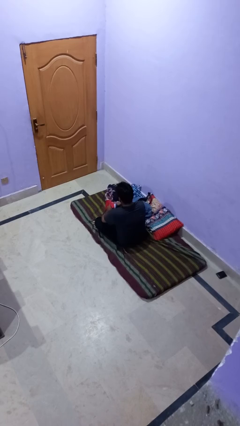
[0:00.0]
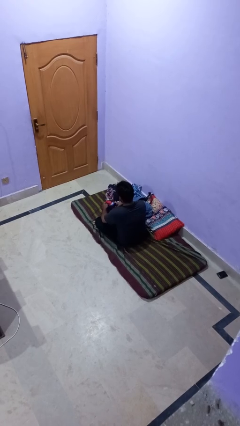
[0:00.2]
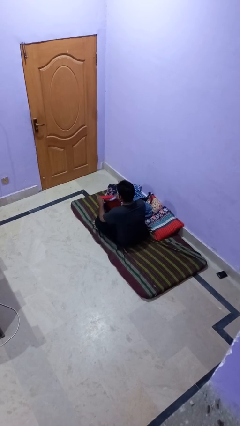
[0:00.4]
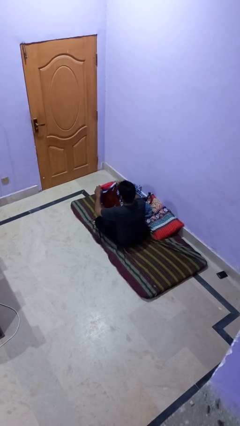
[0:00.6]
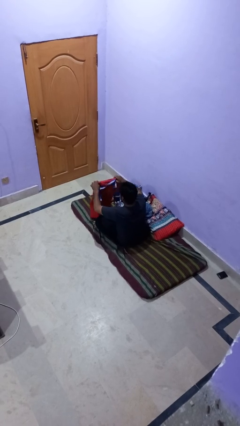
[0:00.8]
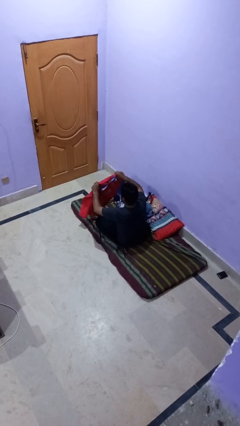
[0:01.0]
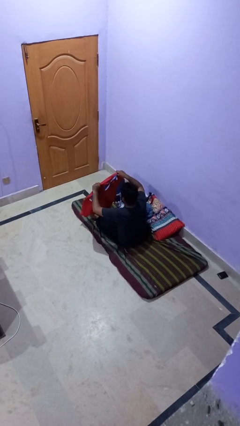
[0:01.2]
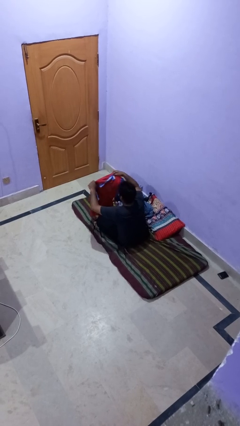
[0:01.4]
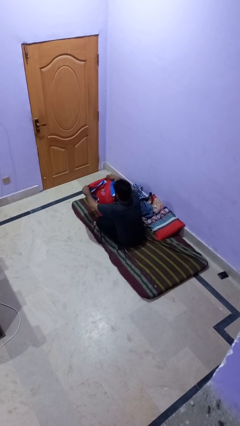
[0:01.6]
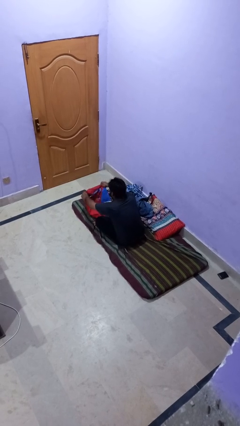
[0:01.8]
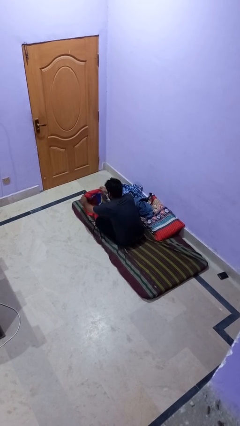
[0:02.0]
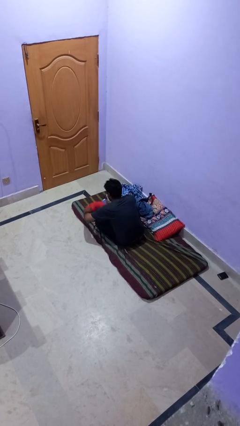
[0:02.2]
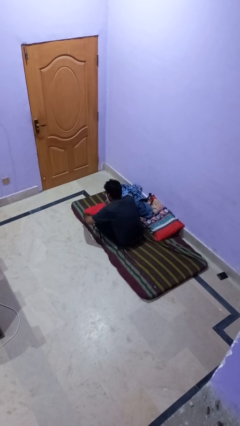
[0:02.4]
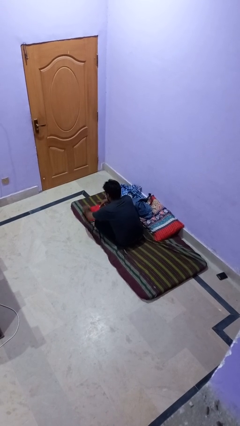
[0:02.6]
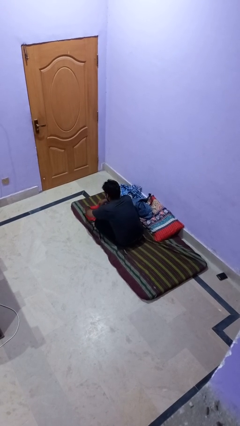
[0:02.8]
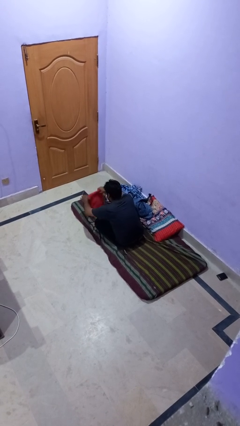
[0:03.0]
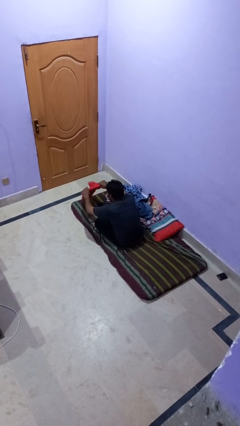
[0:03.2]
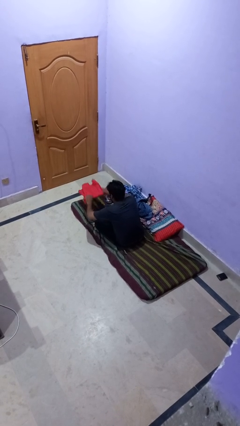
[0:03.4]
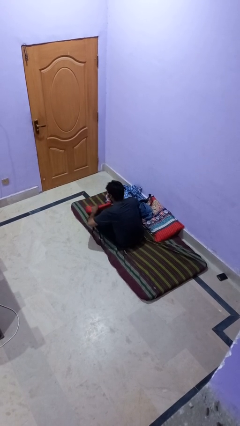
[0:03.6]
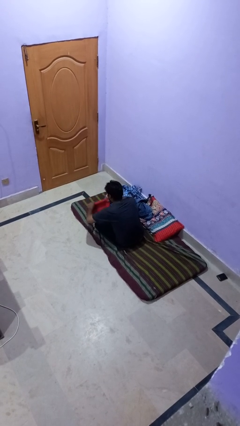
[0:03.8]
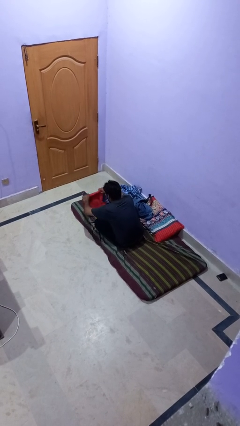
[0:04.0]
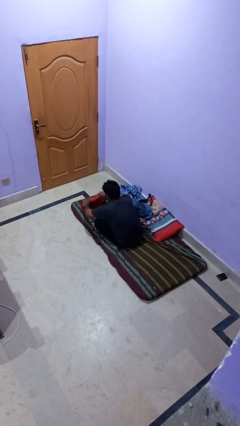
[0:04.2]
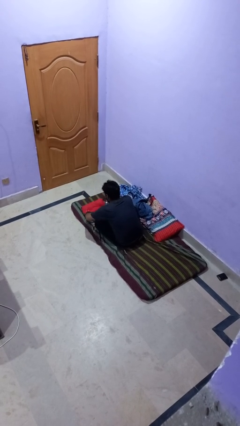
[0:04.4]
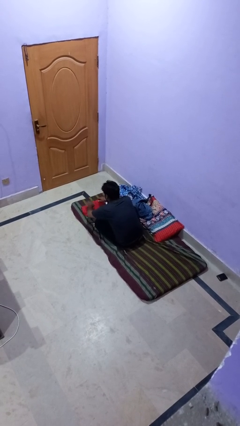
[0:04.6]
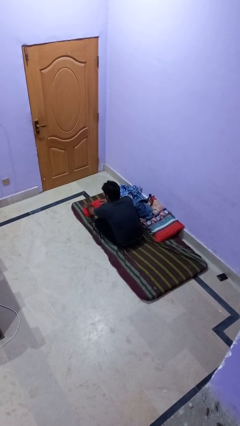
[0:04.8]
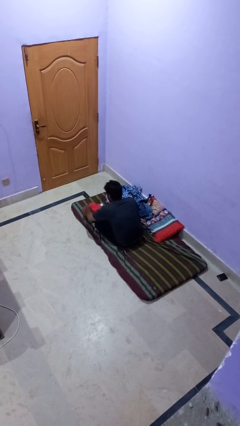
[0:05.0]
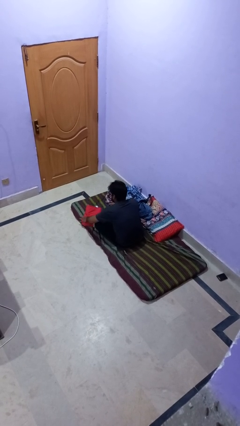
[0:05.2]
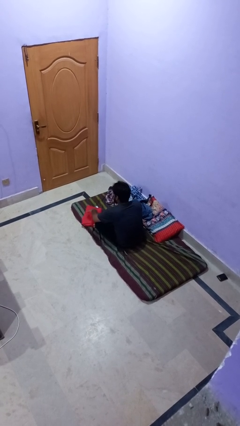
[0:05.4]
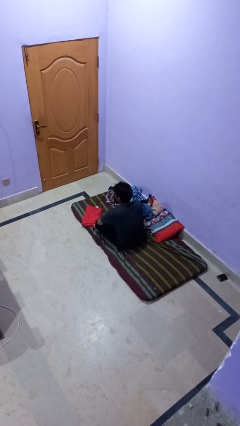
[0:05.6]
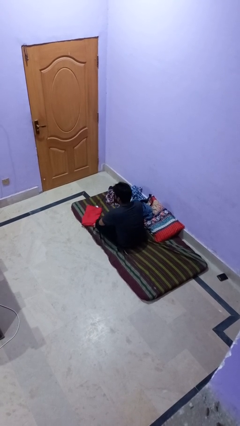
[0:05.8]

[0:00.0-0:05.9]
person folds shirt

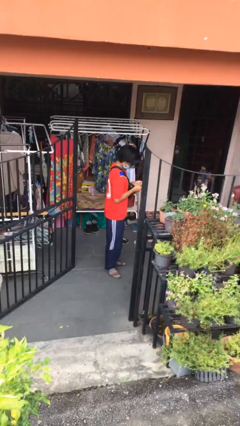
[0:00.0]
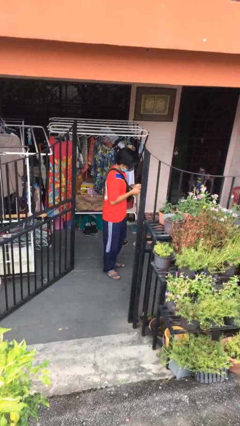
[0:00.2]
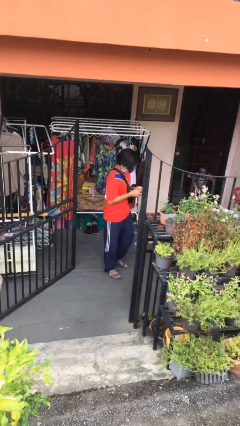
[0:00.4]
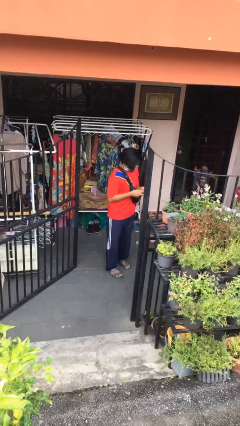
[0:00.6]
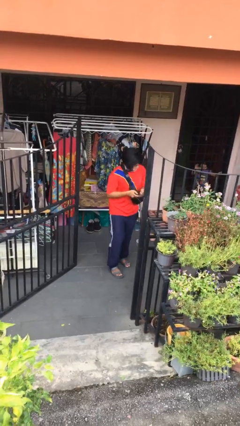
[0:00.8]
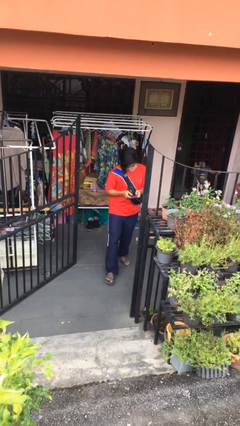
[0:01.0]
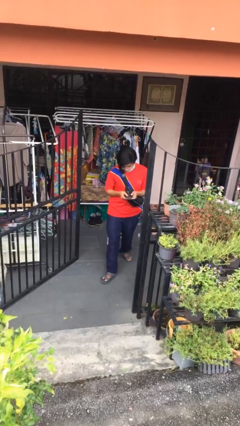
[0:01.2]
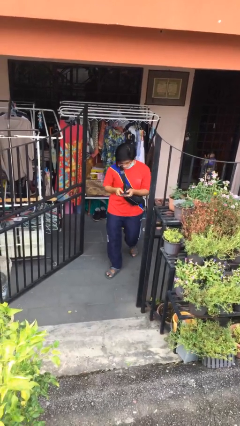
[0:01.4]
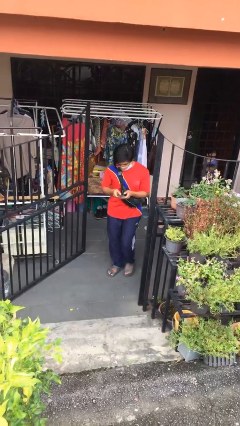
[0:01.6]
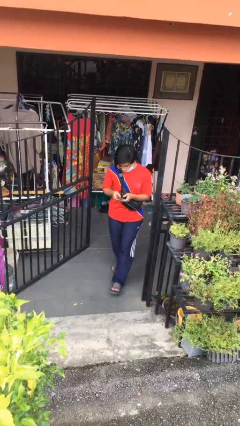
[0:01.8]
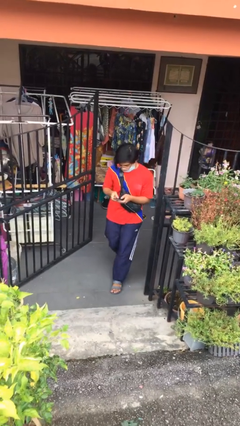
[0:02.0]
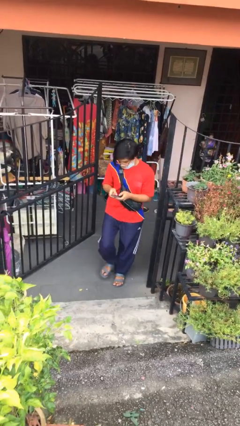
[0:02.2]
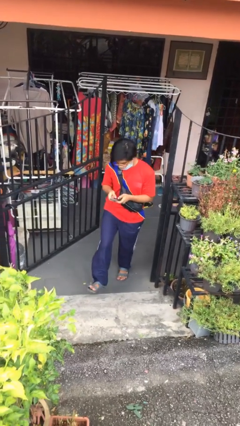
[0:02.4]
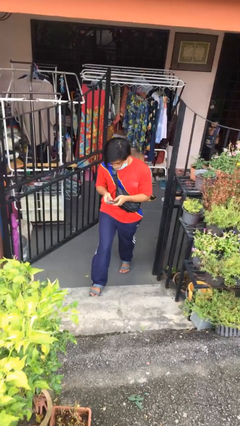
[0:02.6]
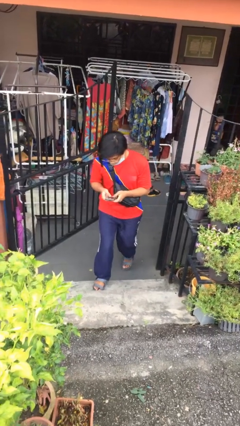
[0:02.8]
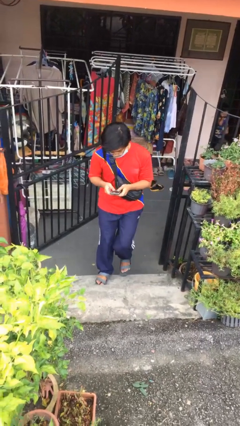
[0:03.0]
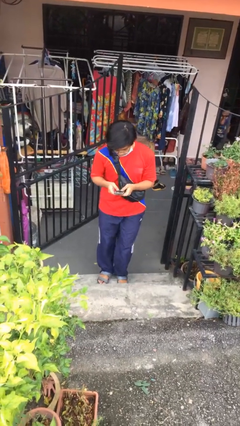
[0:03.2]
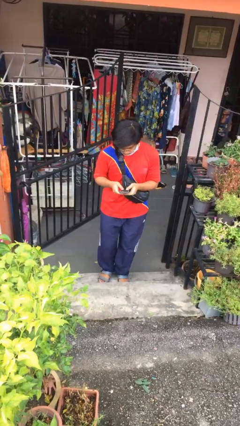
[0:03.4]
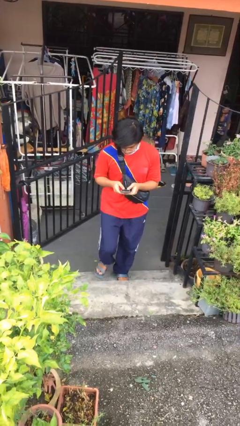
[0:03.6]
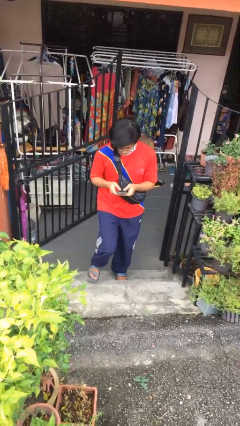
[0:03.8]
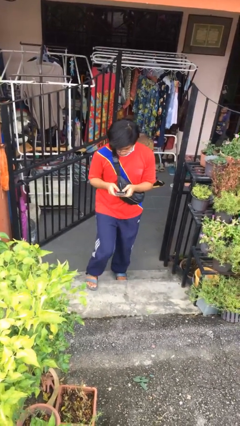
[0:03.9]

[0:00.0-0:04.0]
person enters scene through structure

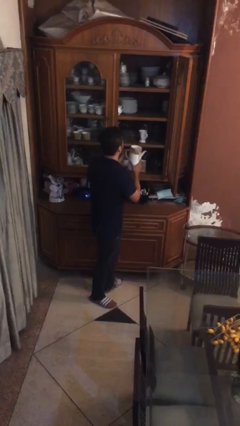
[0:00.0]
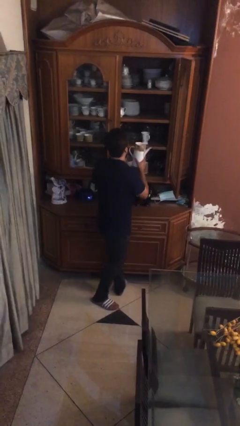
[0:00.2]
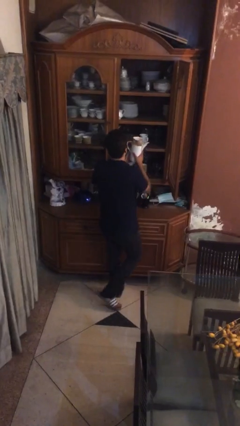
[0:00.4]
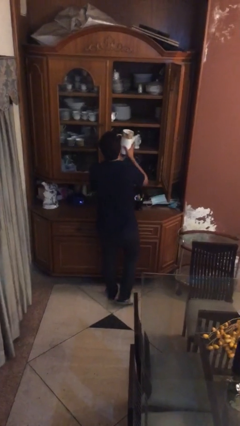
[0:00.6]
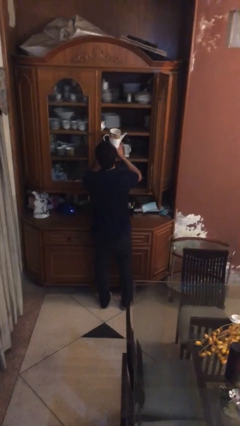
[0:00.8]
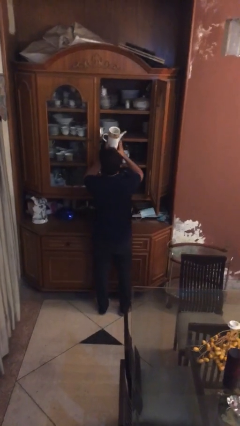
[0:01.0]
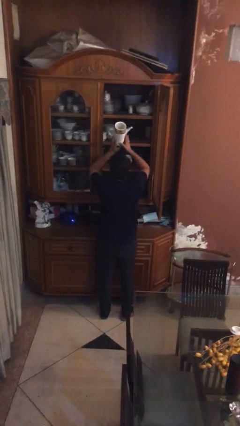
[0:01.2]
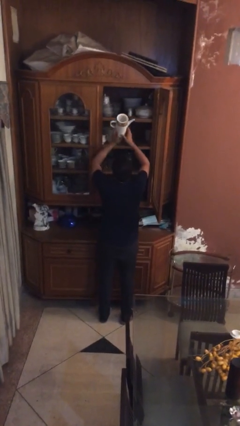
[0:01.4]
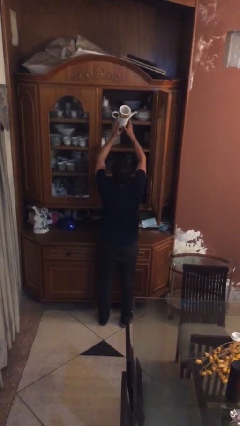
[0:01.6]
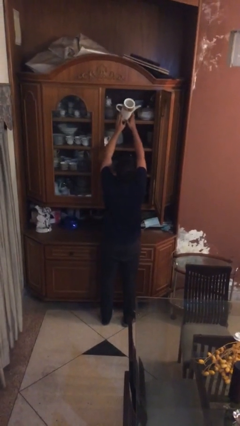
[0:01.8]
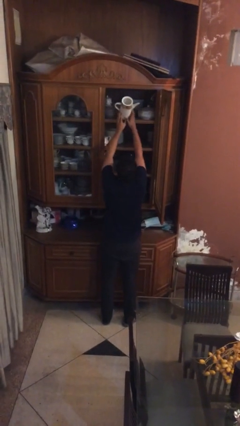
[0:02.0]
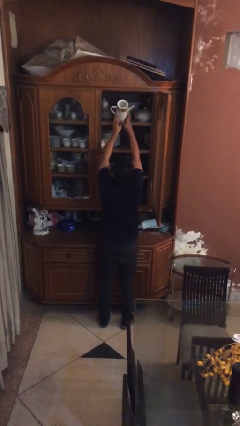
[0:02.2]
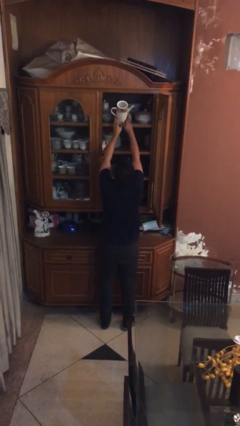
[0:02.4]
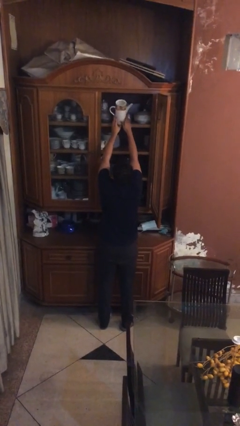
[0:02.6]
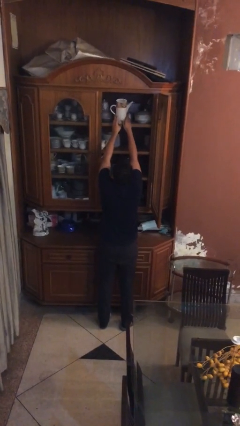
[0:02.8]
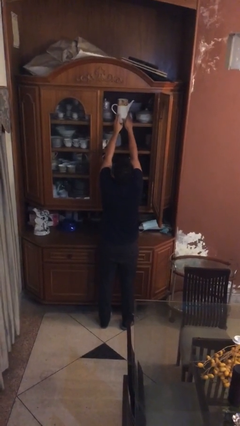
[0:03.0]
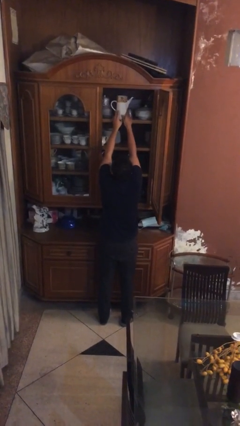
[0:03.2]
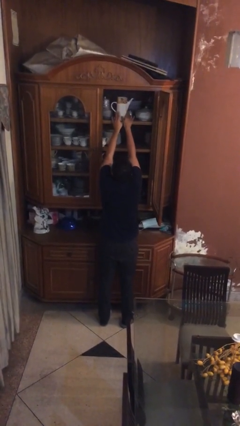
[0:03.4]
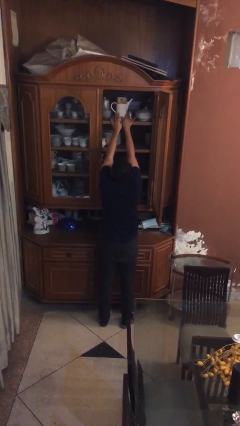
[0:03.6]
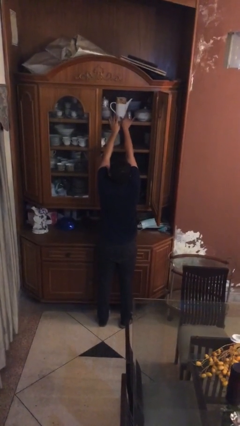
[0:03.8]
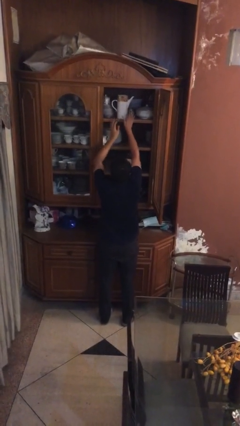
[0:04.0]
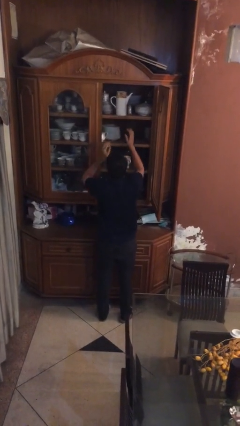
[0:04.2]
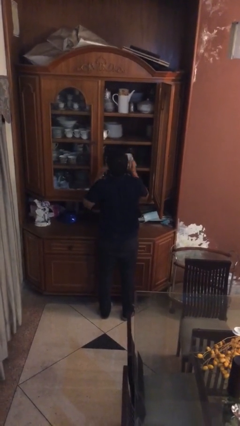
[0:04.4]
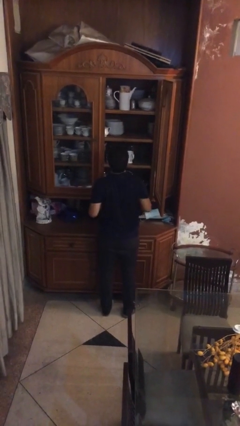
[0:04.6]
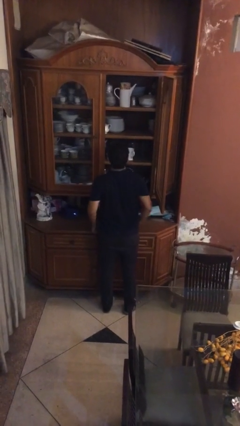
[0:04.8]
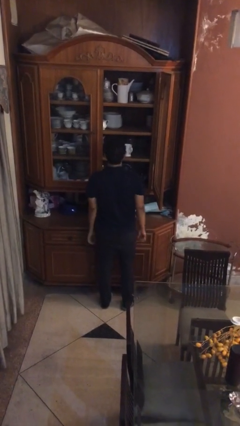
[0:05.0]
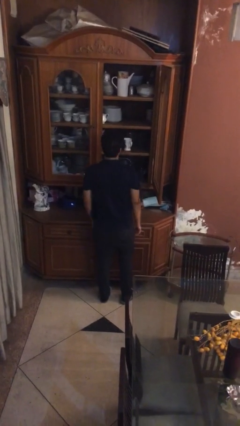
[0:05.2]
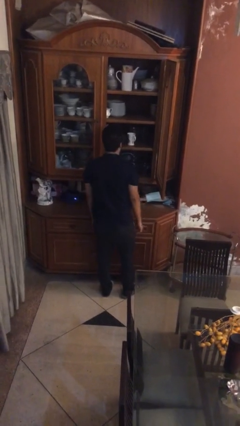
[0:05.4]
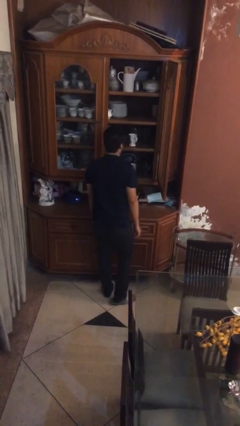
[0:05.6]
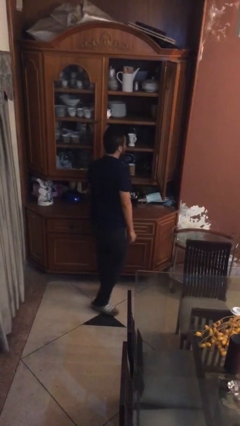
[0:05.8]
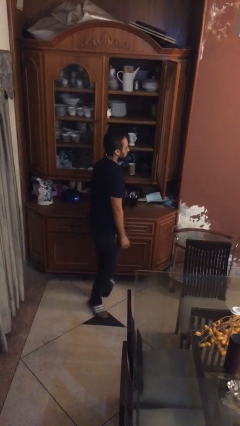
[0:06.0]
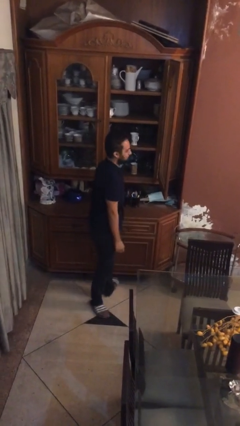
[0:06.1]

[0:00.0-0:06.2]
person puts down object on shelf

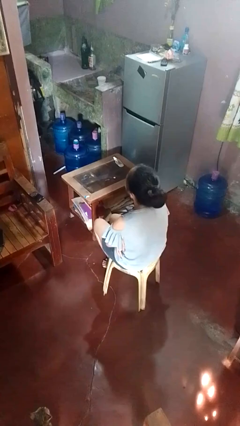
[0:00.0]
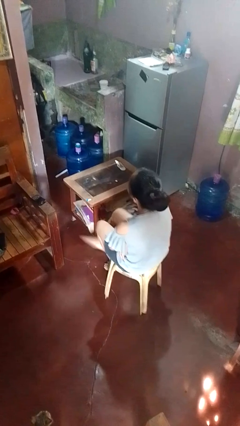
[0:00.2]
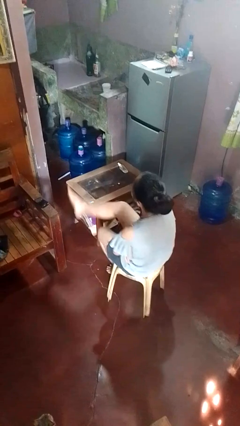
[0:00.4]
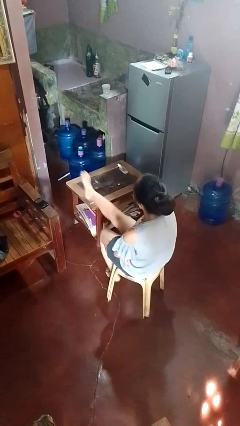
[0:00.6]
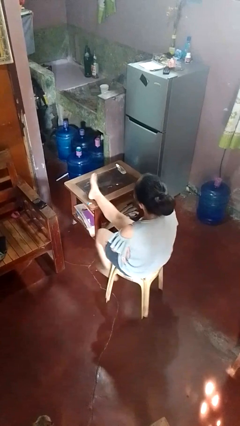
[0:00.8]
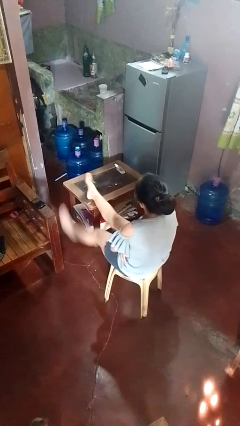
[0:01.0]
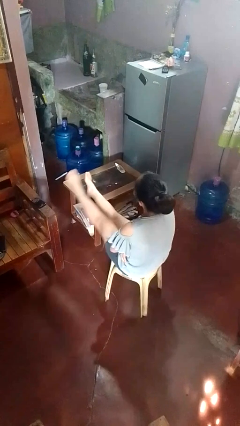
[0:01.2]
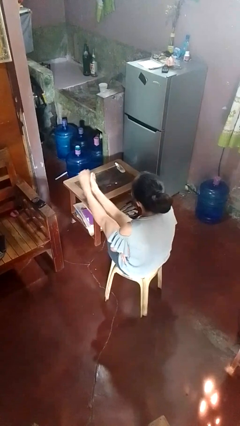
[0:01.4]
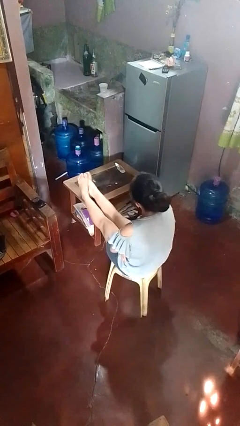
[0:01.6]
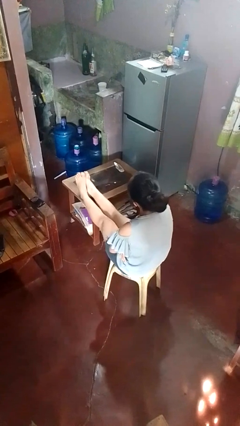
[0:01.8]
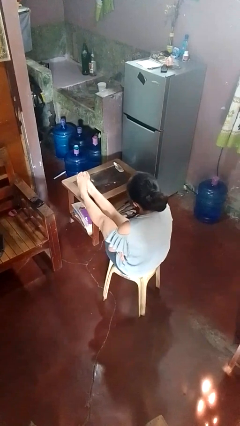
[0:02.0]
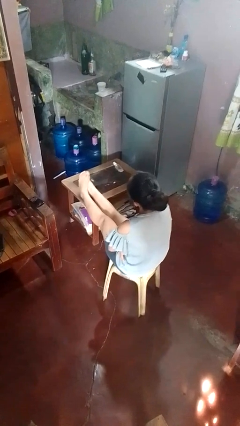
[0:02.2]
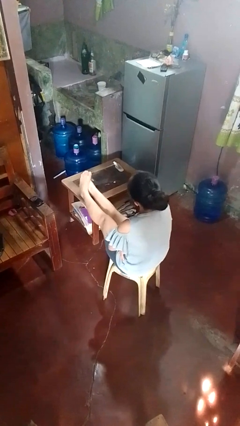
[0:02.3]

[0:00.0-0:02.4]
person puts feet up
